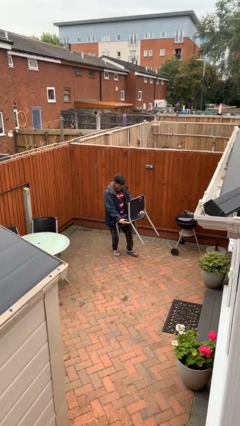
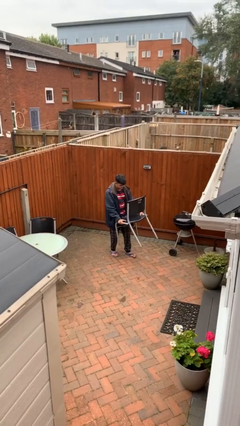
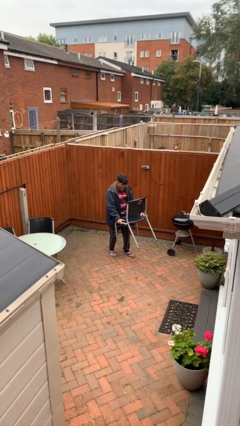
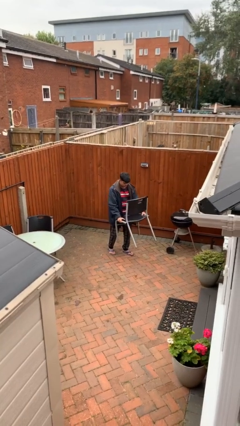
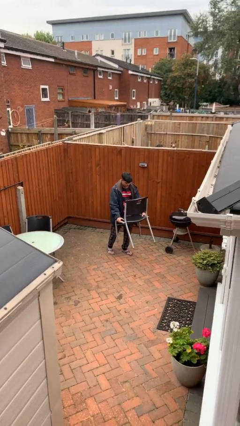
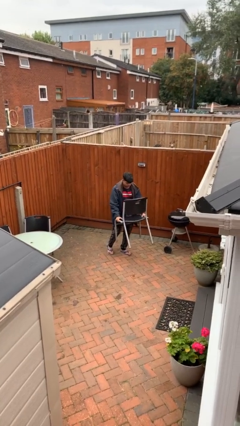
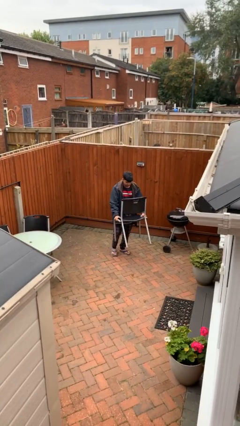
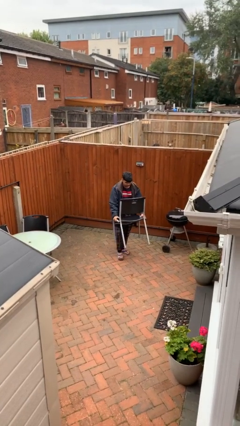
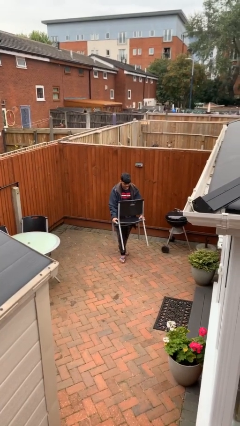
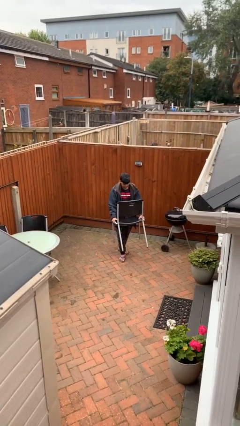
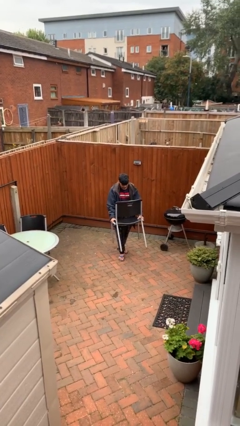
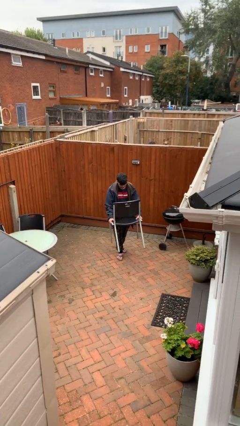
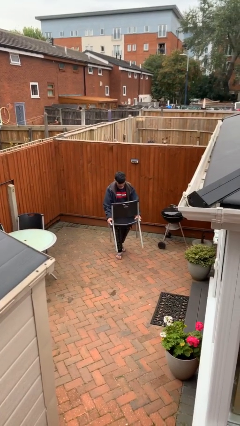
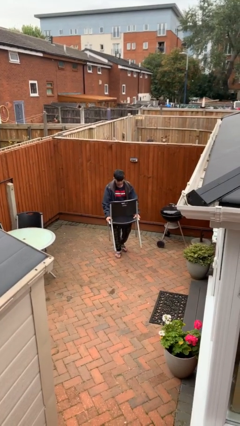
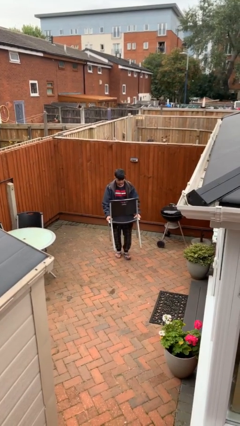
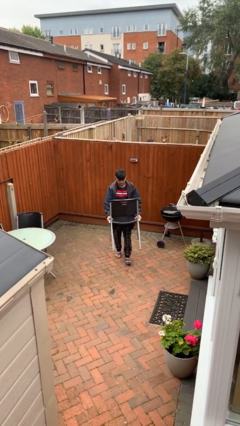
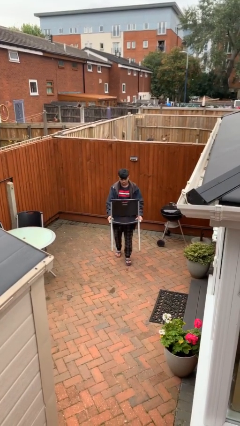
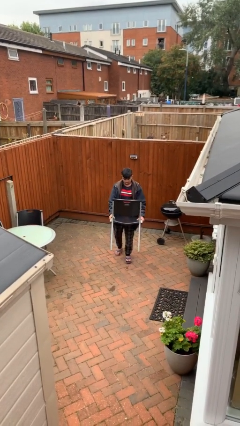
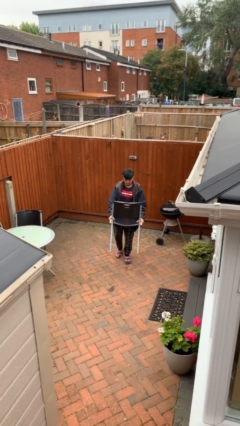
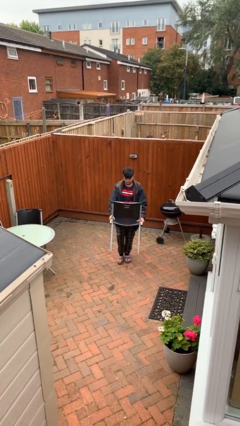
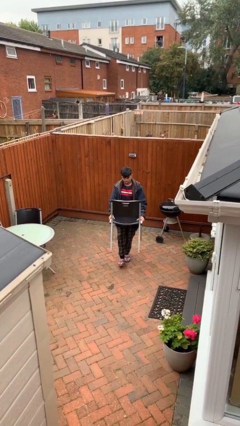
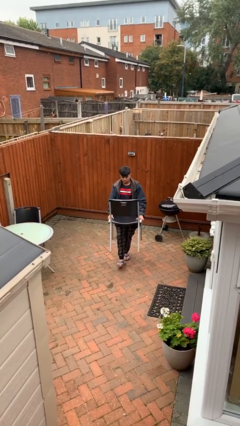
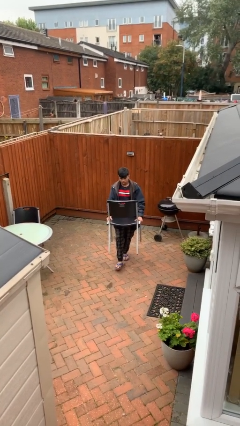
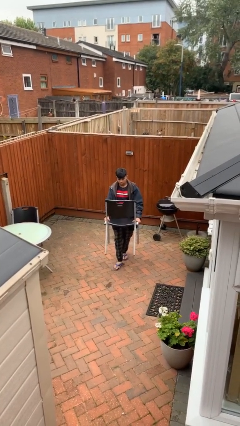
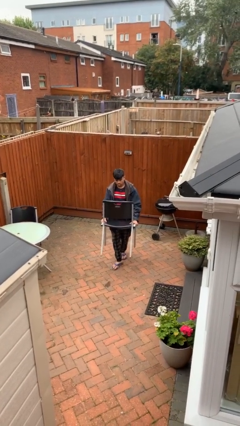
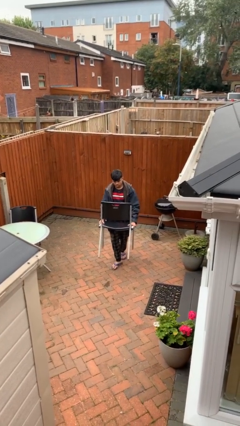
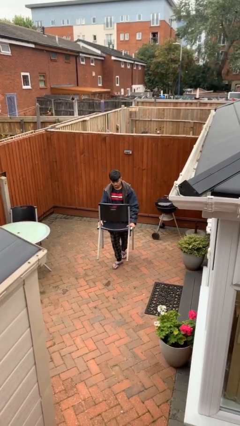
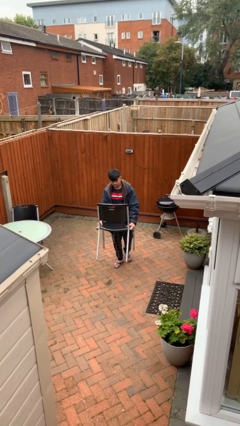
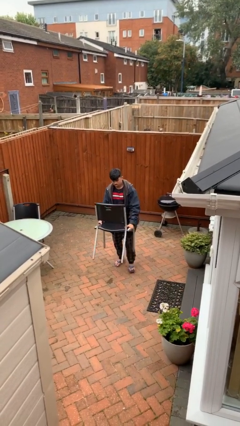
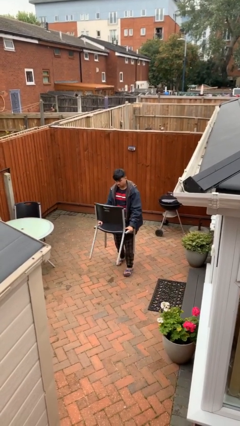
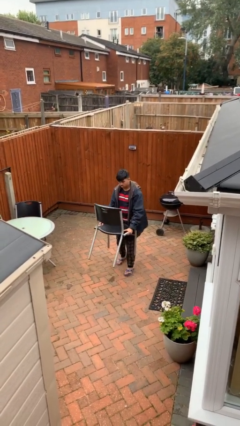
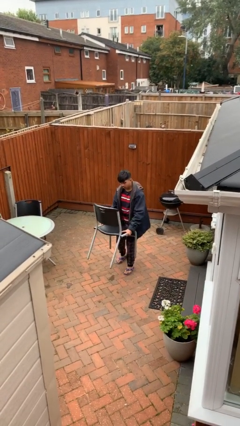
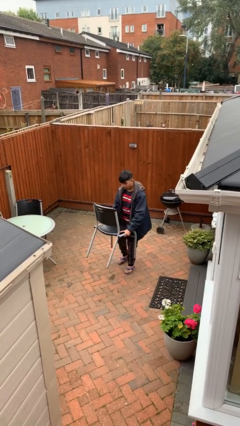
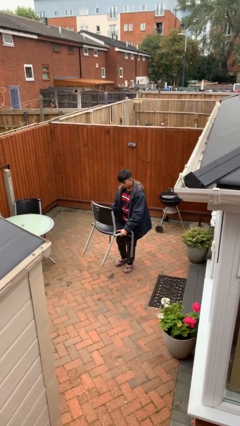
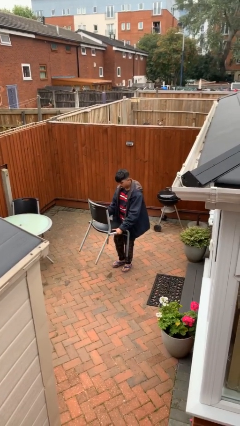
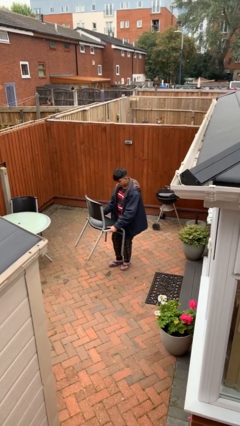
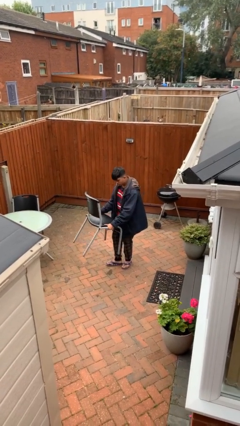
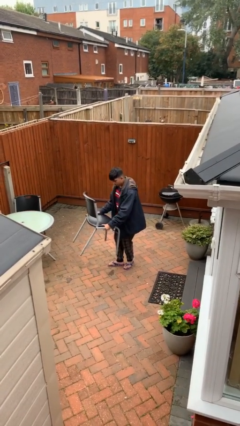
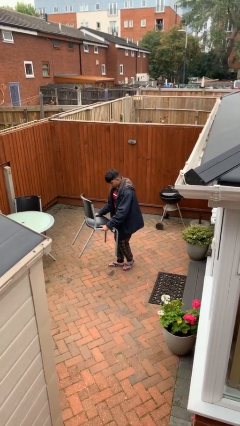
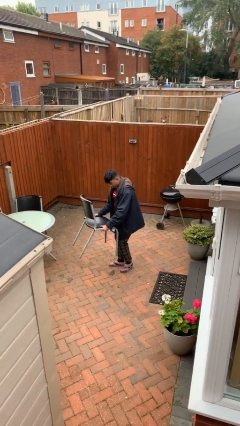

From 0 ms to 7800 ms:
person carries heavy object

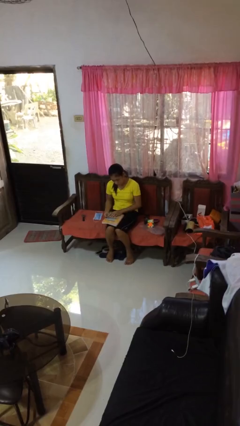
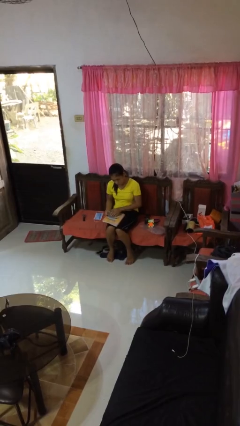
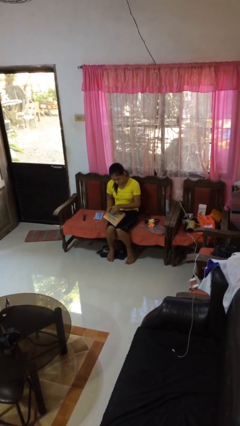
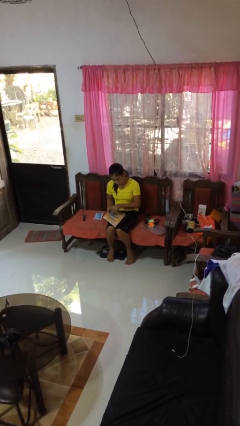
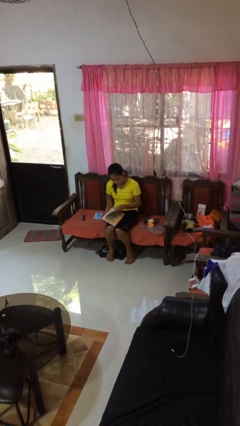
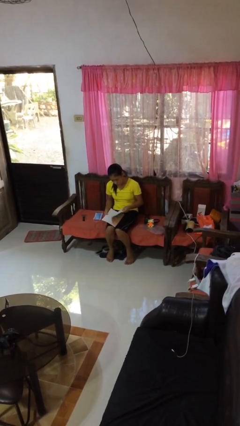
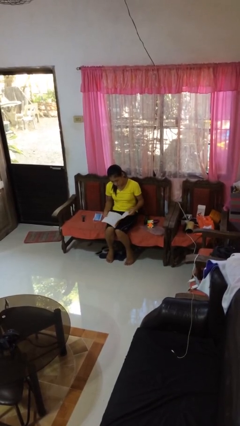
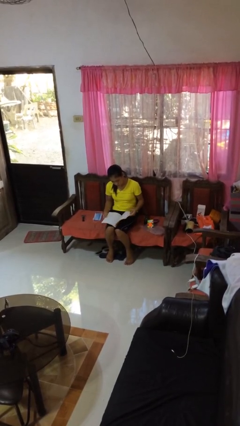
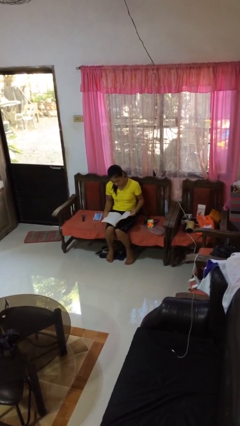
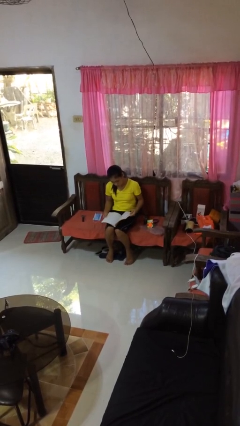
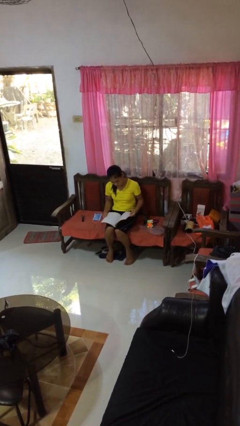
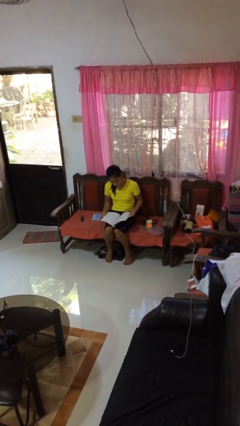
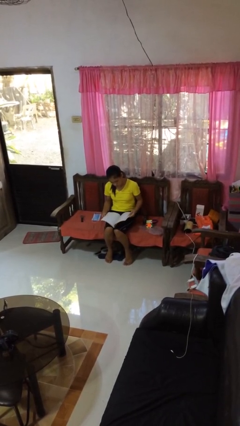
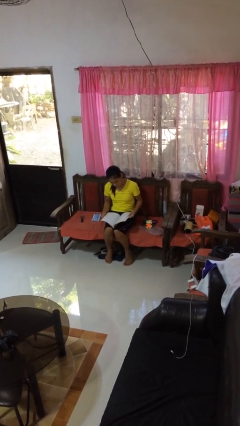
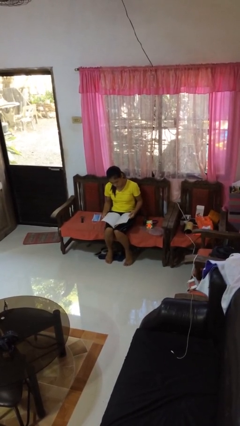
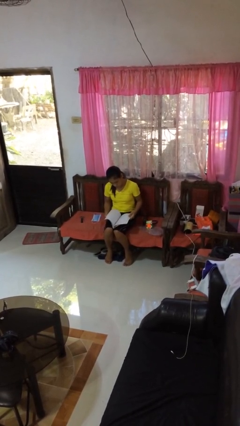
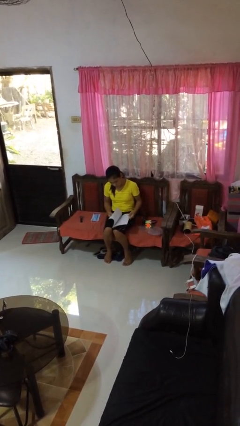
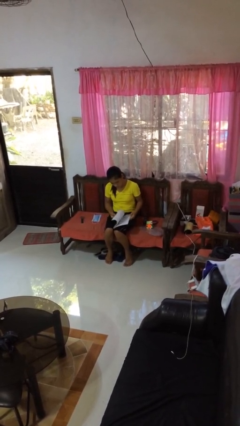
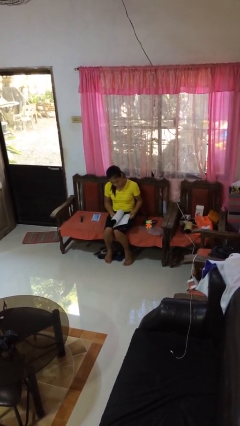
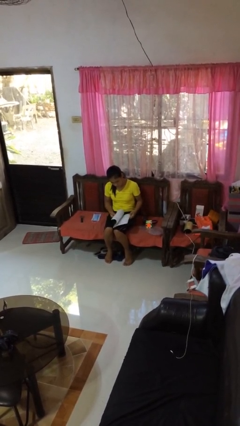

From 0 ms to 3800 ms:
person reads book

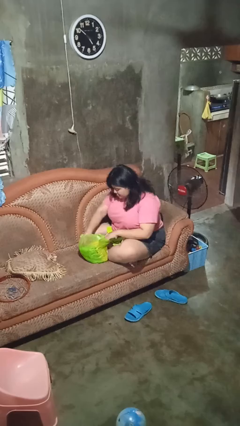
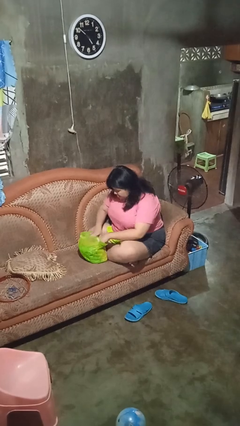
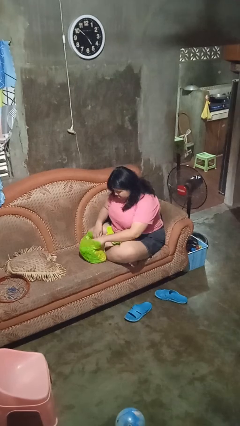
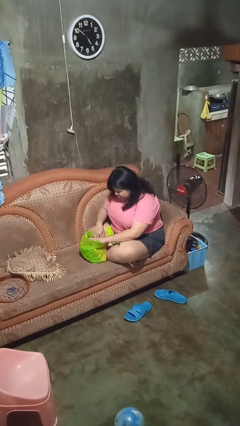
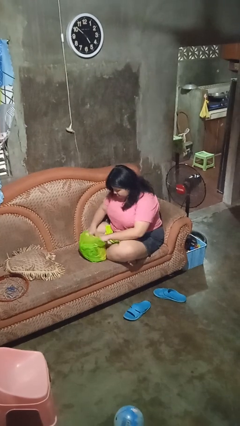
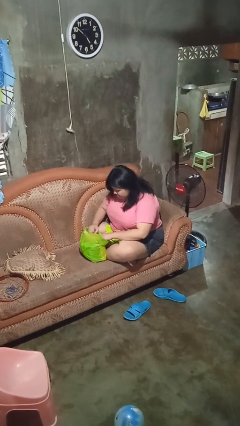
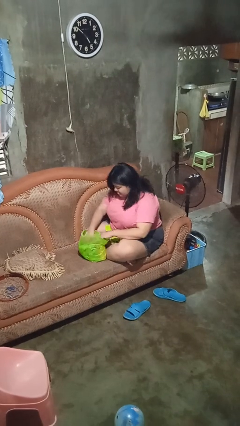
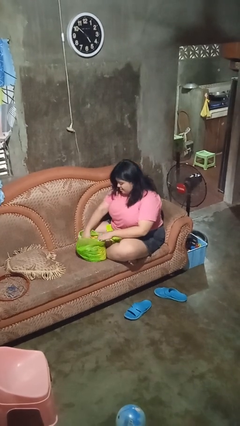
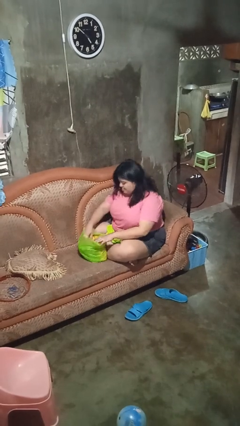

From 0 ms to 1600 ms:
person searches in bag

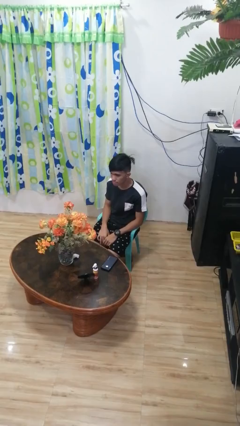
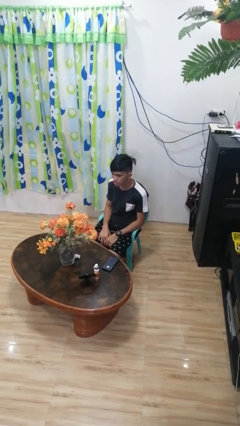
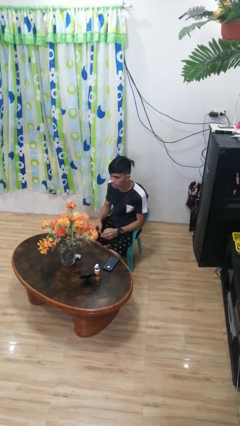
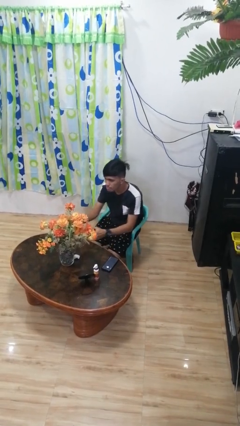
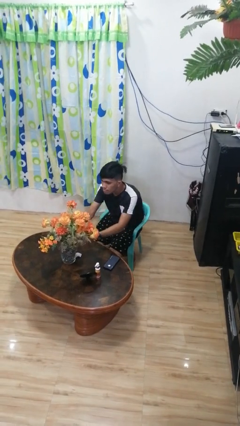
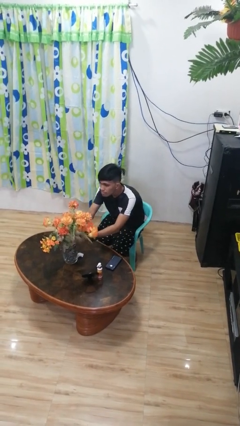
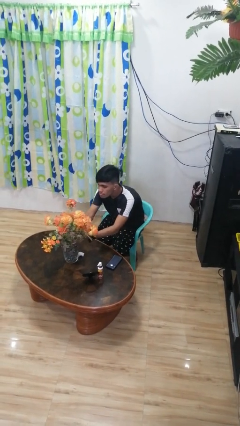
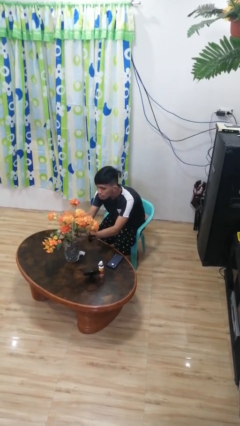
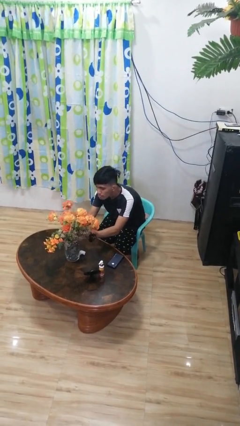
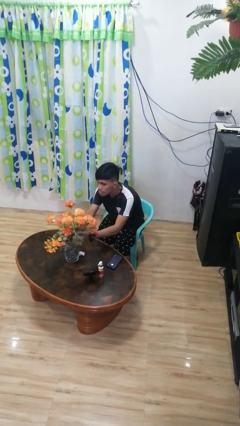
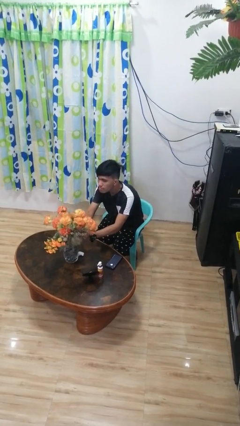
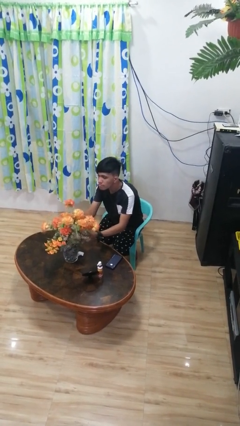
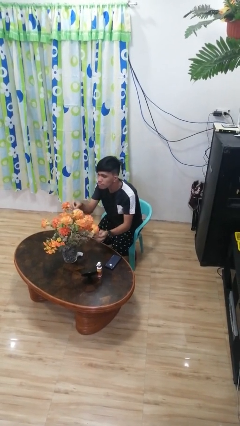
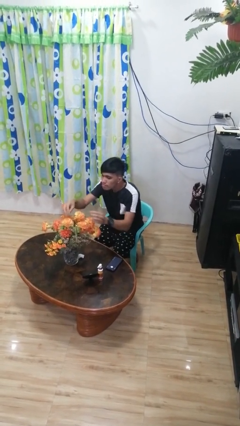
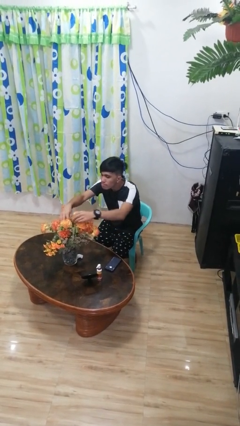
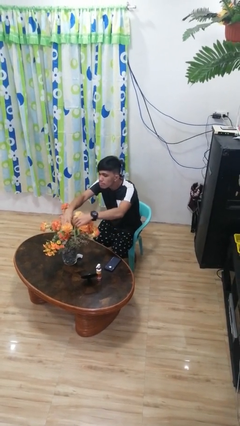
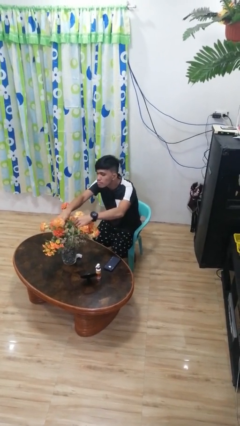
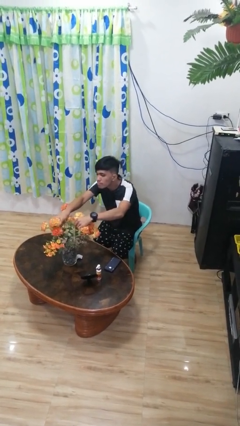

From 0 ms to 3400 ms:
person arranges flowers in vase

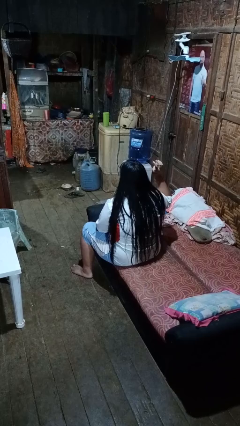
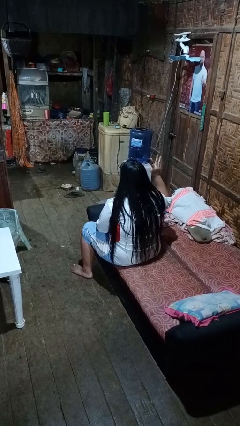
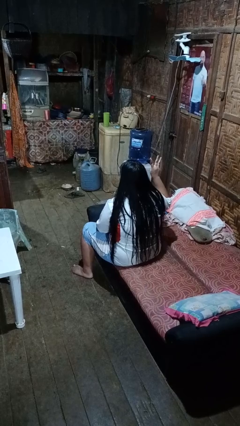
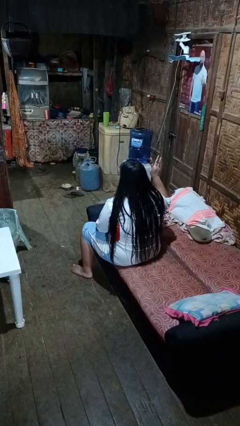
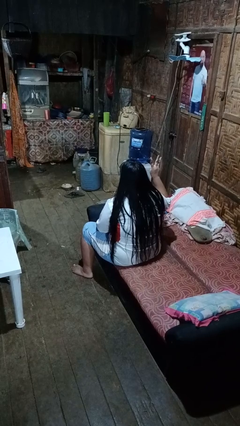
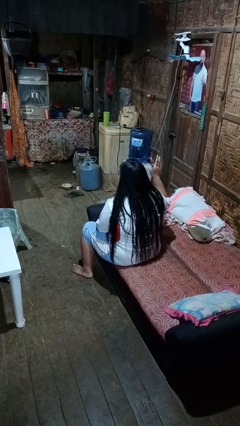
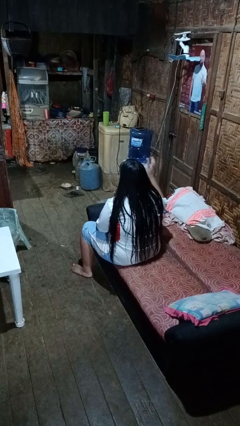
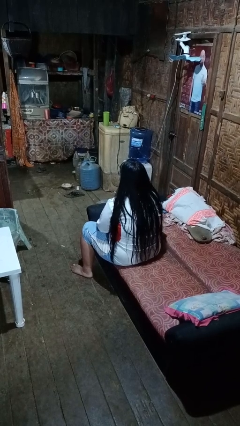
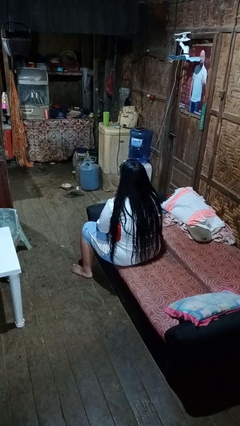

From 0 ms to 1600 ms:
person gestures number three
